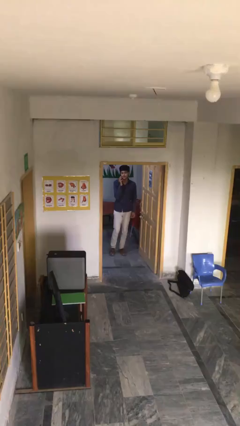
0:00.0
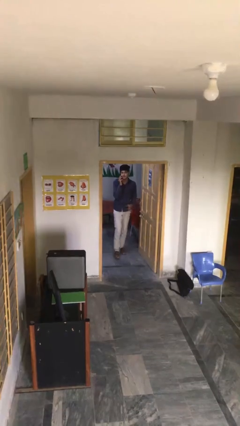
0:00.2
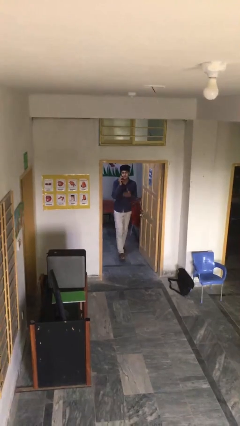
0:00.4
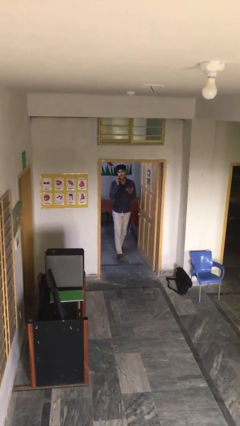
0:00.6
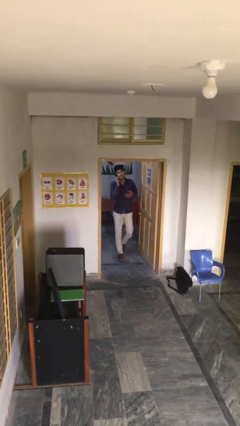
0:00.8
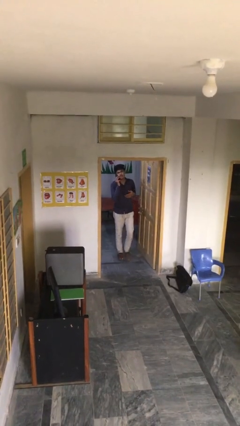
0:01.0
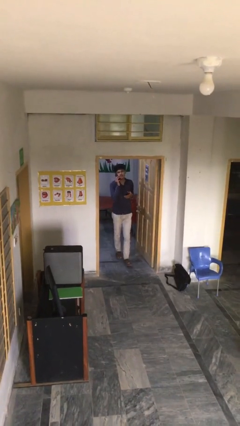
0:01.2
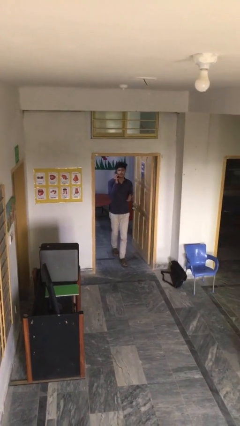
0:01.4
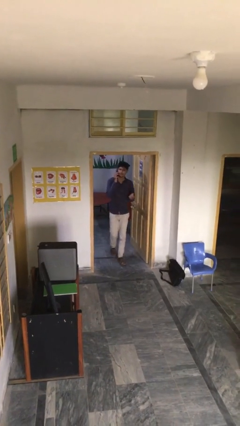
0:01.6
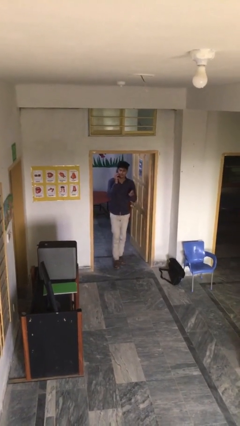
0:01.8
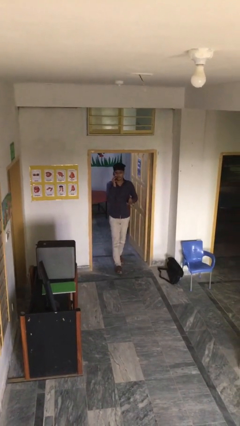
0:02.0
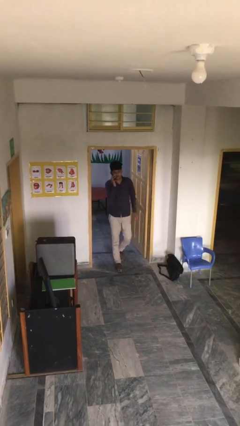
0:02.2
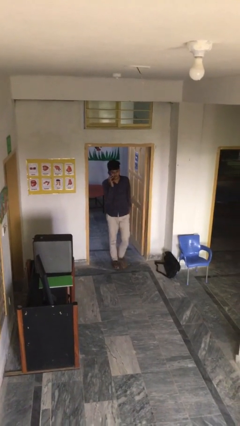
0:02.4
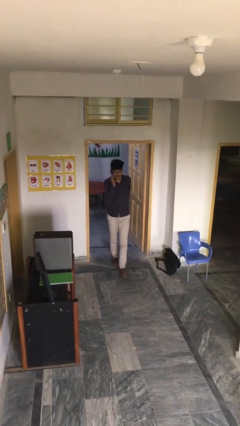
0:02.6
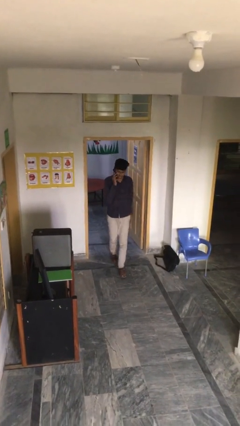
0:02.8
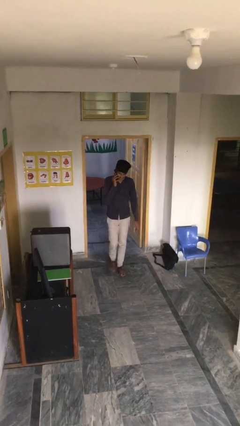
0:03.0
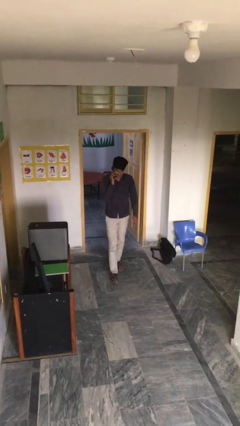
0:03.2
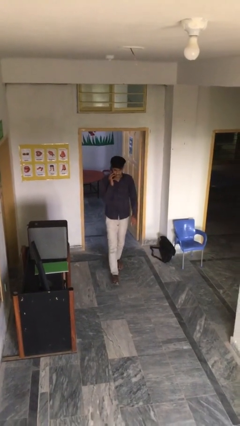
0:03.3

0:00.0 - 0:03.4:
person enters scene through structure

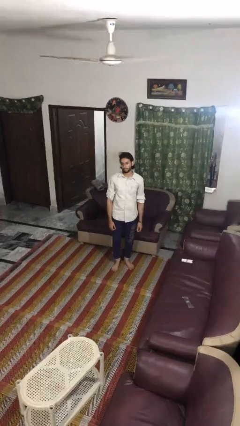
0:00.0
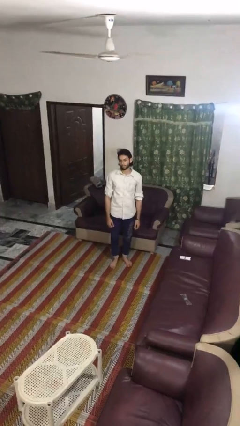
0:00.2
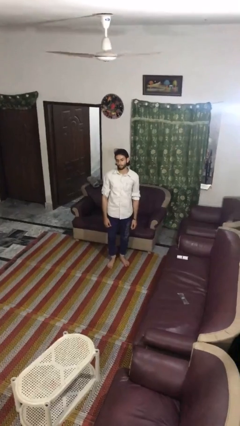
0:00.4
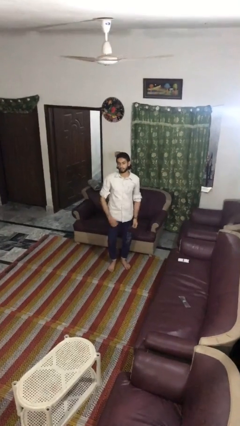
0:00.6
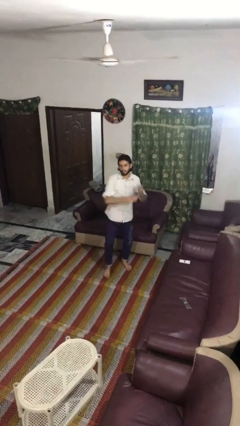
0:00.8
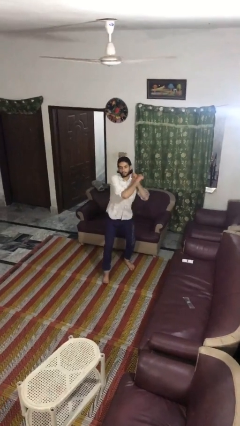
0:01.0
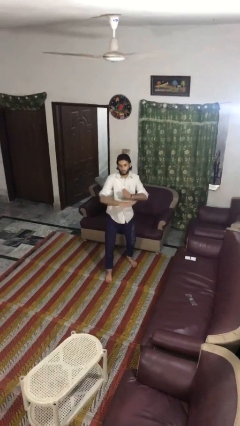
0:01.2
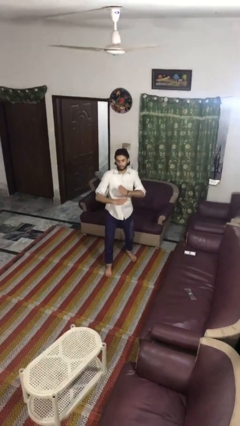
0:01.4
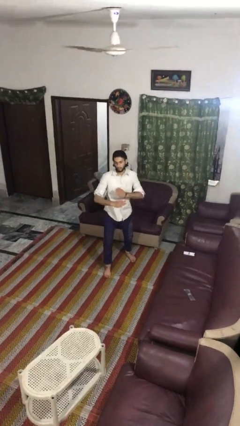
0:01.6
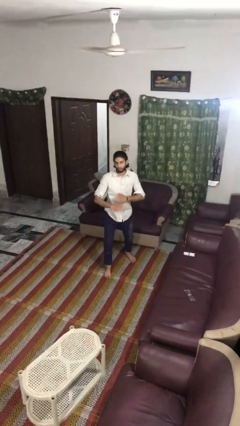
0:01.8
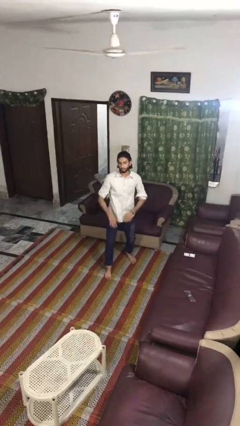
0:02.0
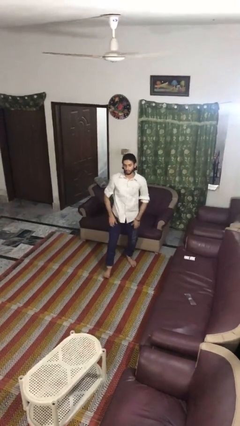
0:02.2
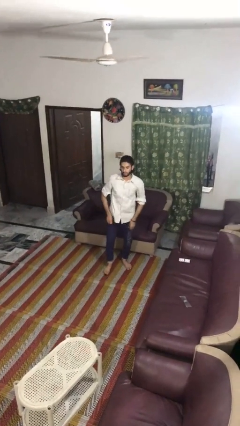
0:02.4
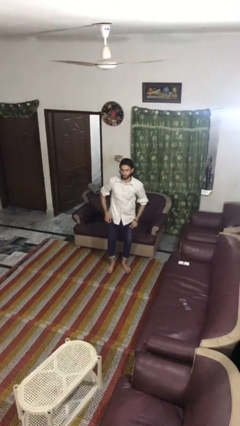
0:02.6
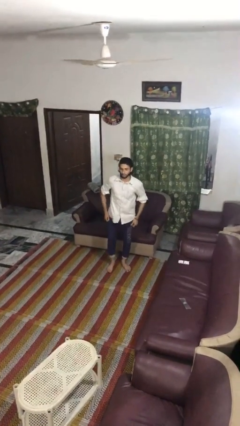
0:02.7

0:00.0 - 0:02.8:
person karate chop

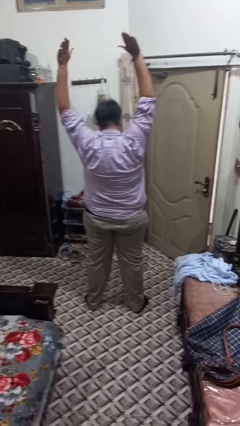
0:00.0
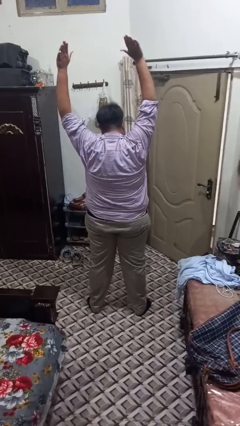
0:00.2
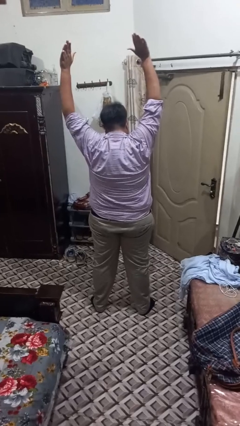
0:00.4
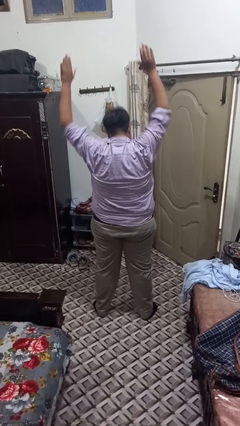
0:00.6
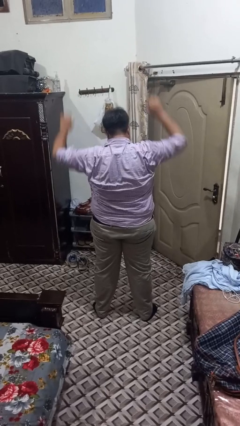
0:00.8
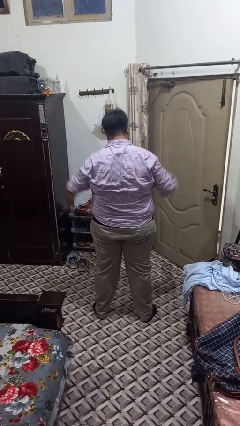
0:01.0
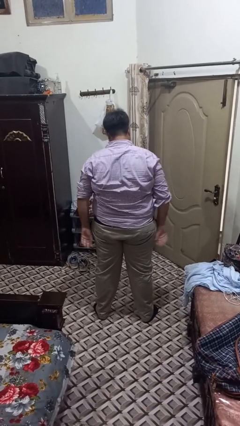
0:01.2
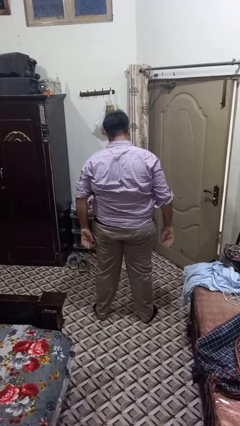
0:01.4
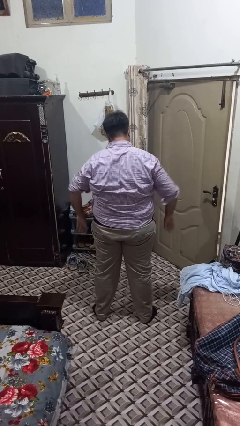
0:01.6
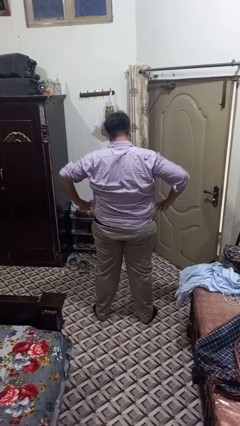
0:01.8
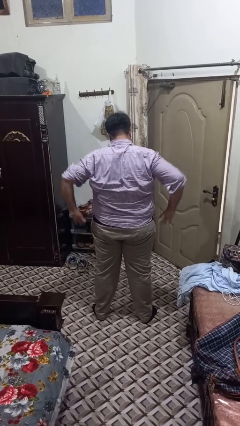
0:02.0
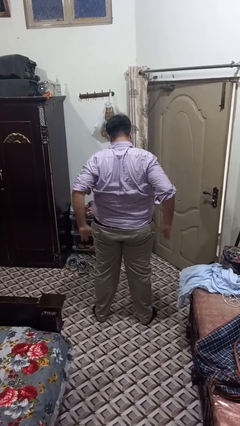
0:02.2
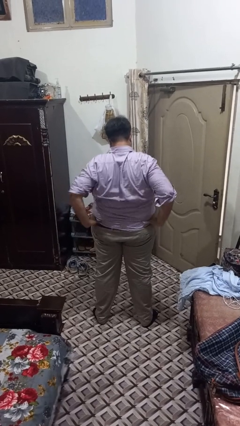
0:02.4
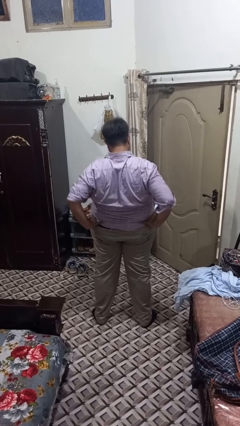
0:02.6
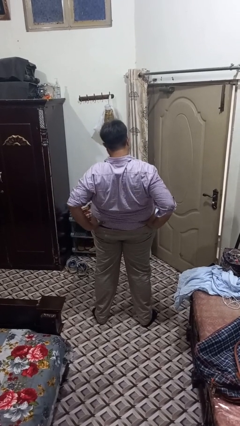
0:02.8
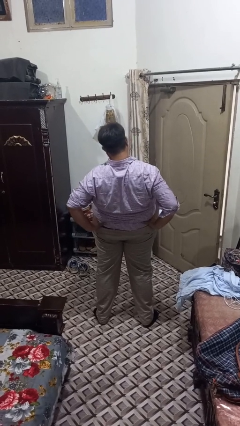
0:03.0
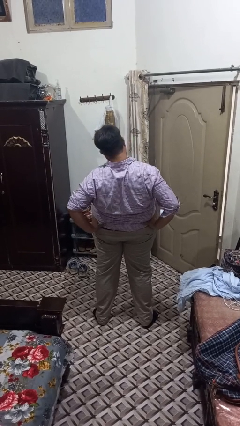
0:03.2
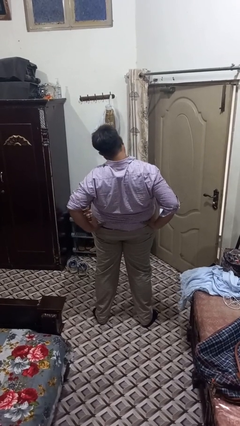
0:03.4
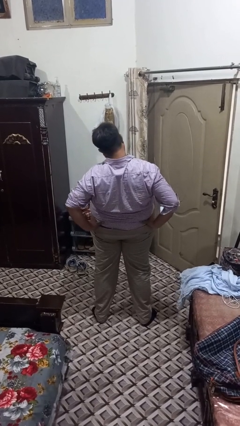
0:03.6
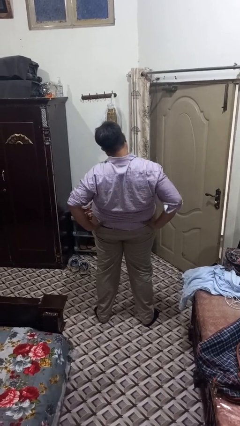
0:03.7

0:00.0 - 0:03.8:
person stretches back

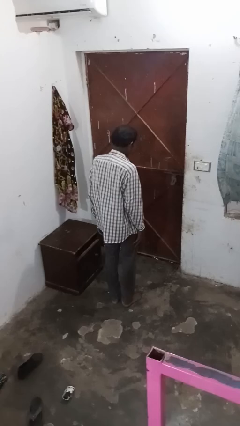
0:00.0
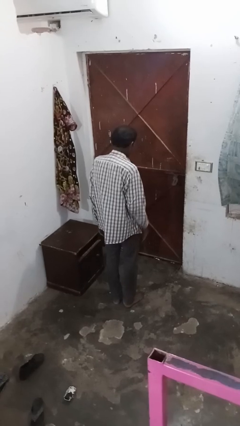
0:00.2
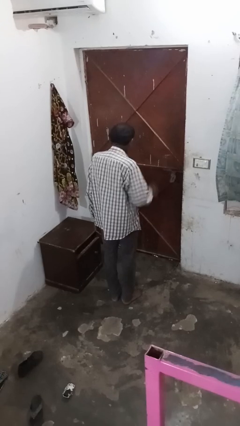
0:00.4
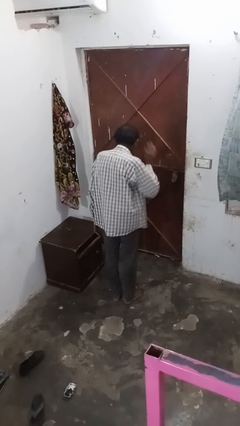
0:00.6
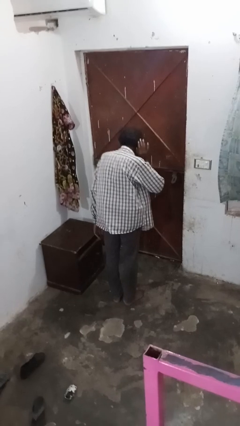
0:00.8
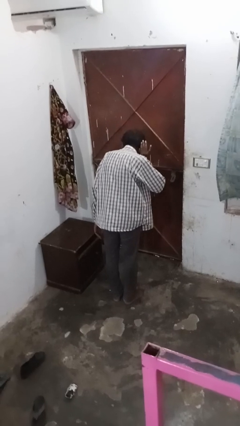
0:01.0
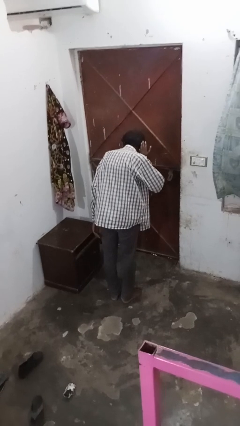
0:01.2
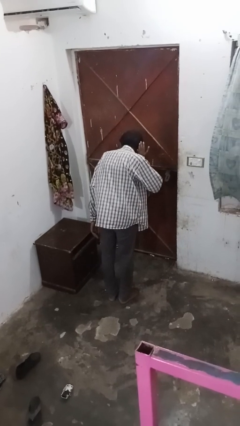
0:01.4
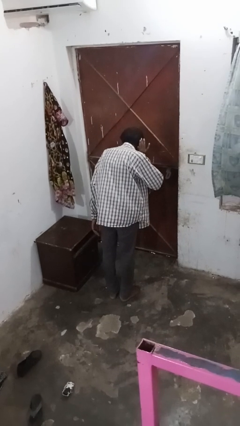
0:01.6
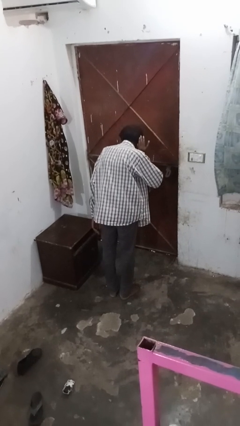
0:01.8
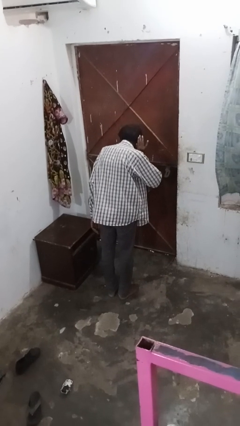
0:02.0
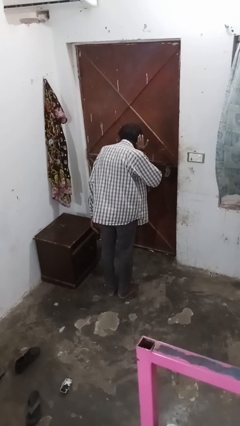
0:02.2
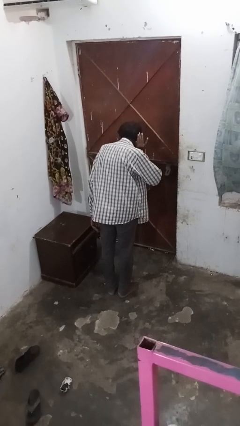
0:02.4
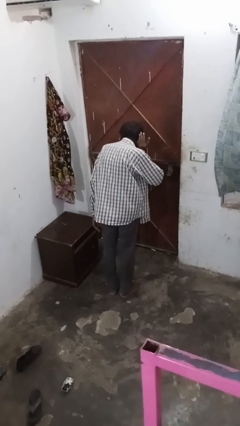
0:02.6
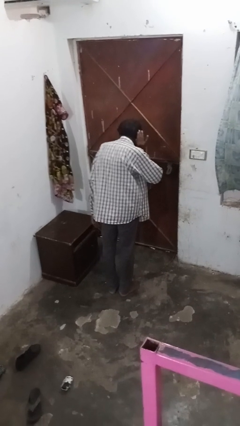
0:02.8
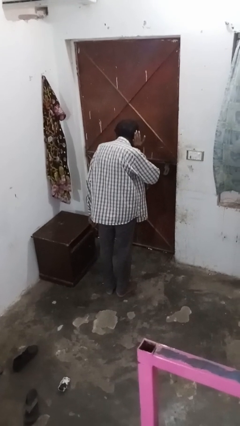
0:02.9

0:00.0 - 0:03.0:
person gestures listen closely

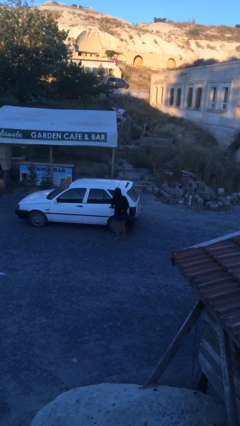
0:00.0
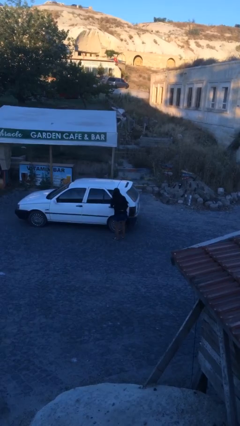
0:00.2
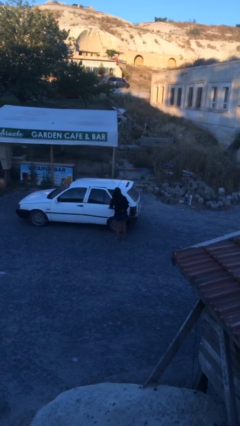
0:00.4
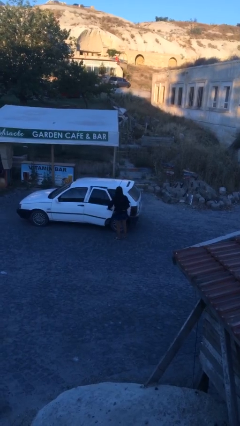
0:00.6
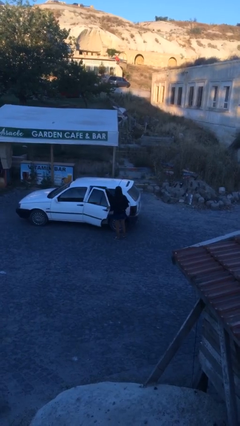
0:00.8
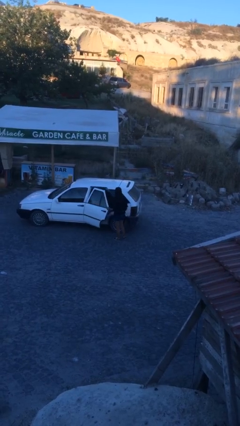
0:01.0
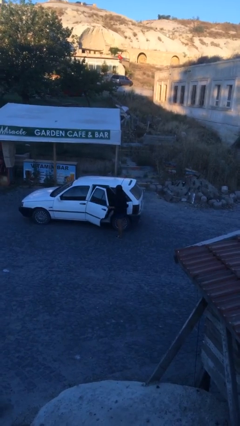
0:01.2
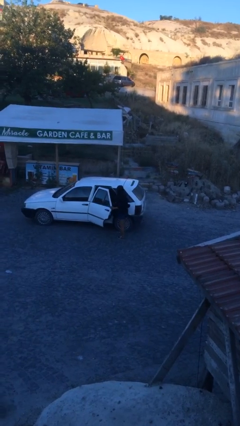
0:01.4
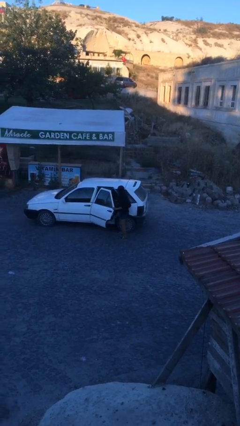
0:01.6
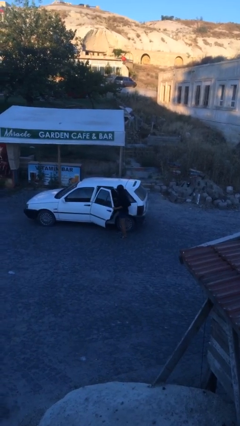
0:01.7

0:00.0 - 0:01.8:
person opens car door

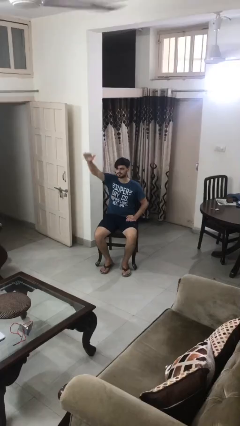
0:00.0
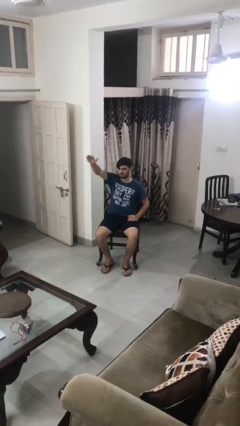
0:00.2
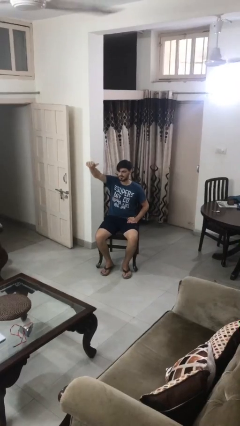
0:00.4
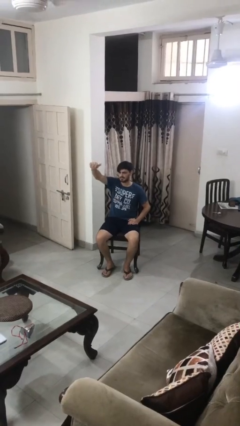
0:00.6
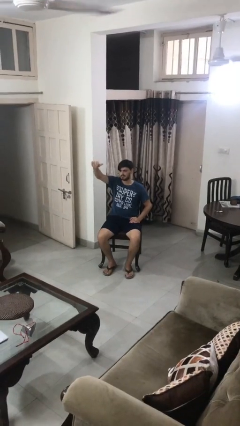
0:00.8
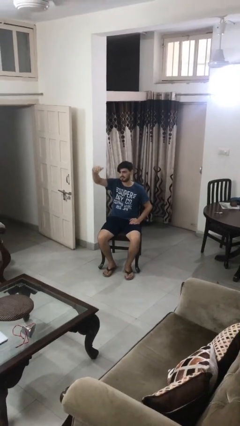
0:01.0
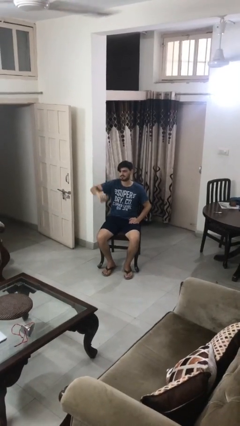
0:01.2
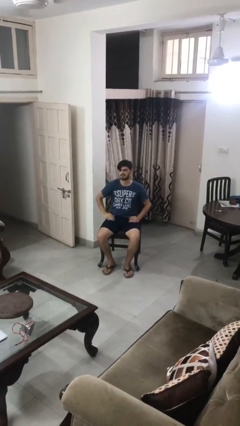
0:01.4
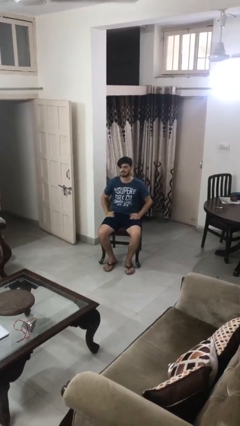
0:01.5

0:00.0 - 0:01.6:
person gestures come here

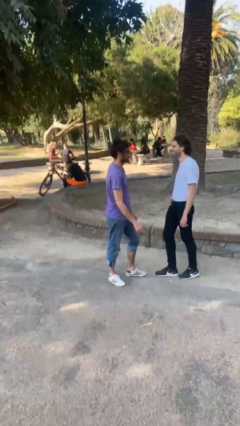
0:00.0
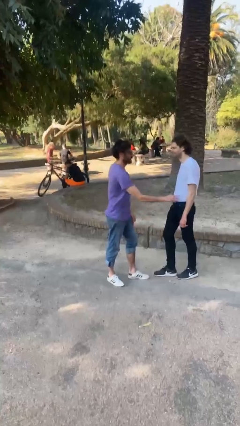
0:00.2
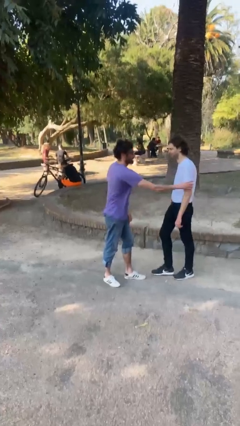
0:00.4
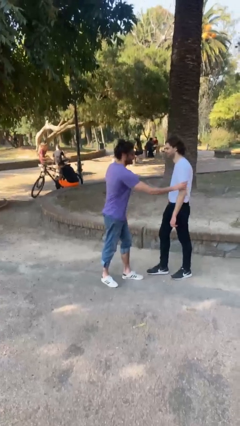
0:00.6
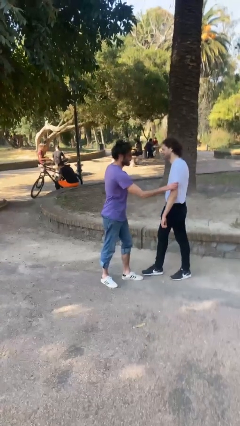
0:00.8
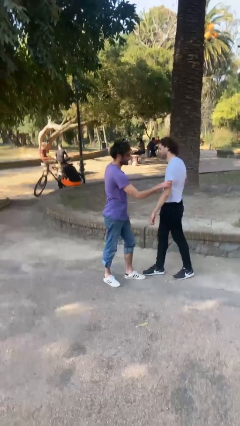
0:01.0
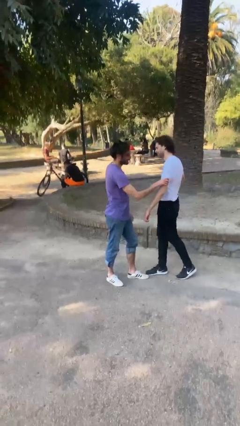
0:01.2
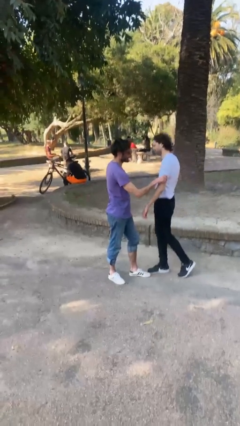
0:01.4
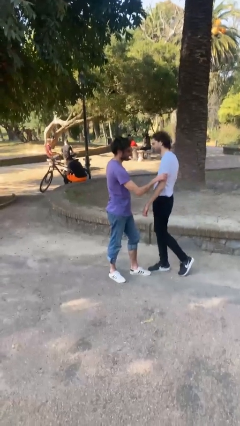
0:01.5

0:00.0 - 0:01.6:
person grabs person by bicep
